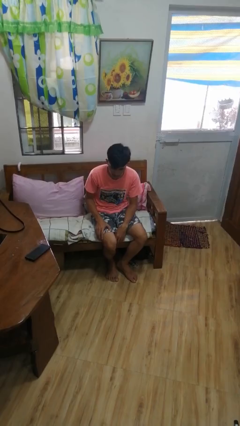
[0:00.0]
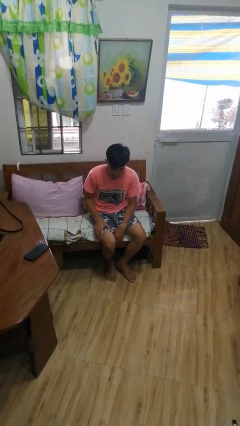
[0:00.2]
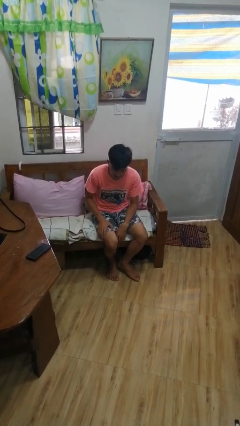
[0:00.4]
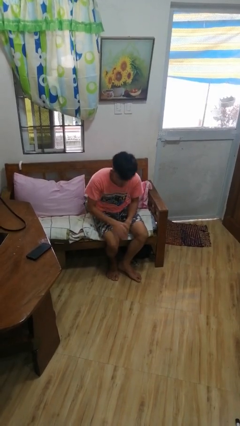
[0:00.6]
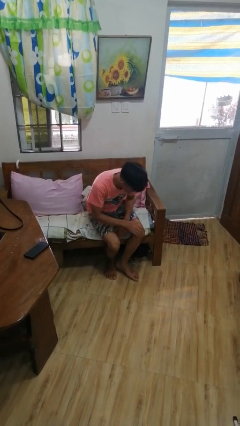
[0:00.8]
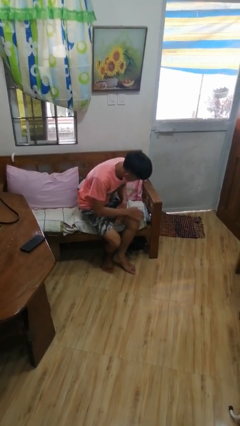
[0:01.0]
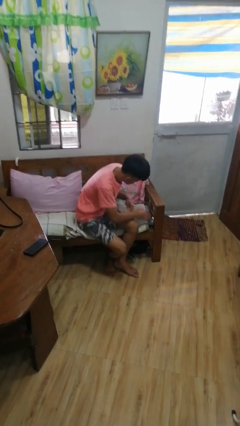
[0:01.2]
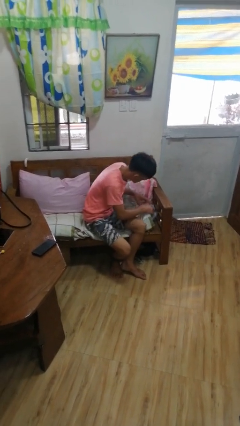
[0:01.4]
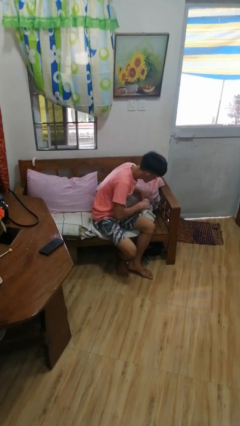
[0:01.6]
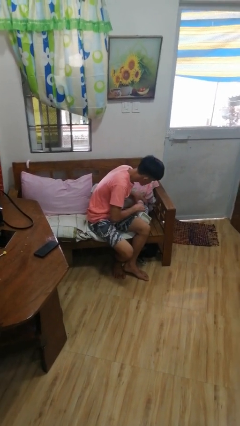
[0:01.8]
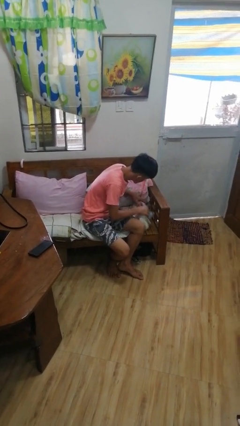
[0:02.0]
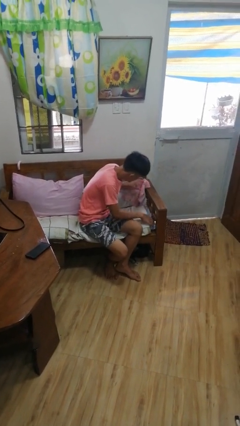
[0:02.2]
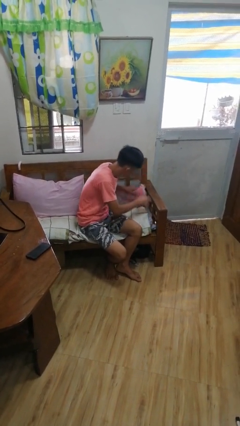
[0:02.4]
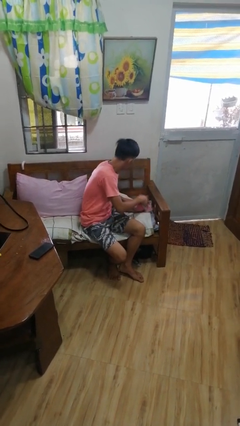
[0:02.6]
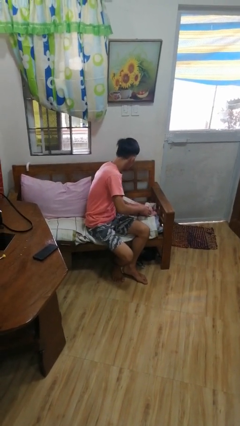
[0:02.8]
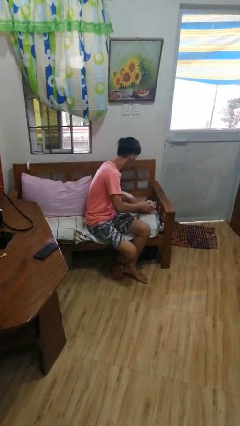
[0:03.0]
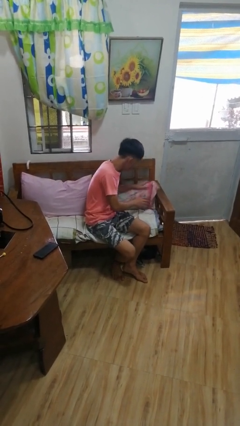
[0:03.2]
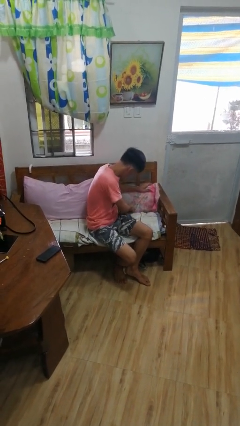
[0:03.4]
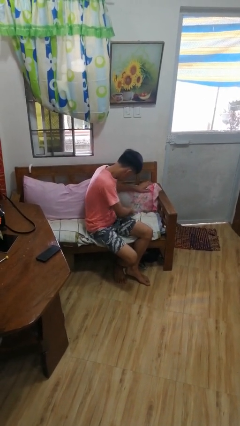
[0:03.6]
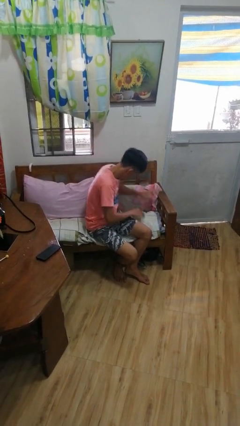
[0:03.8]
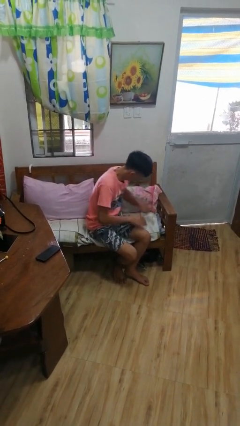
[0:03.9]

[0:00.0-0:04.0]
person searches in couch

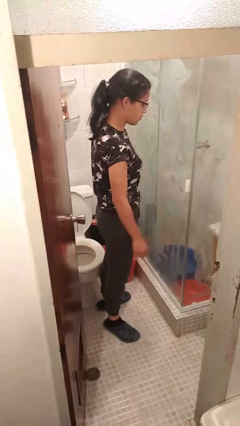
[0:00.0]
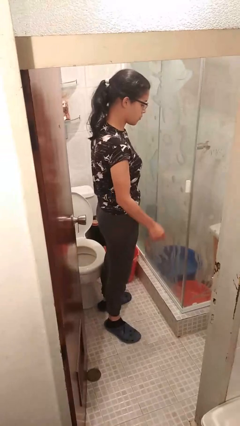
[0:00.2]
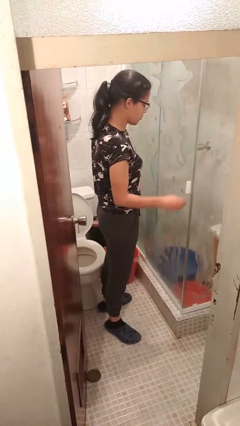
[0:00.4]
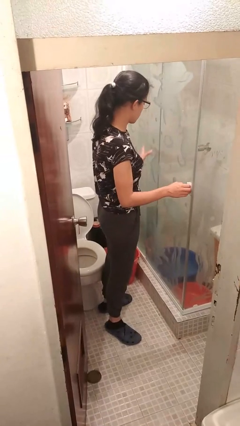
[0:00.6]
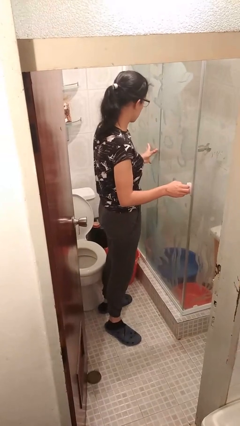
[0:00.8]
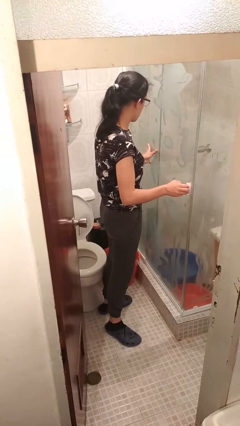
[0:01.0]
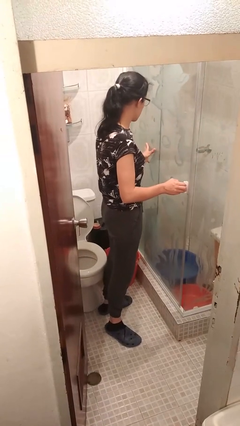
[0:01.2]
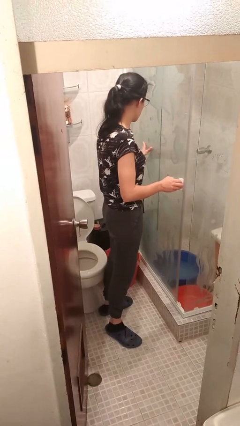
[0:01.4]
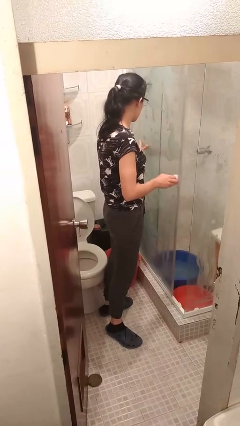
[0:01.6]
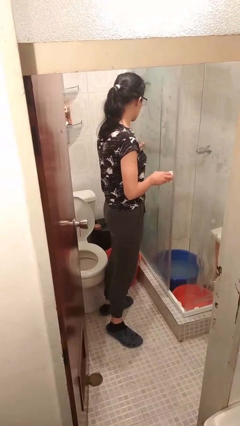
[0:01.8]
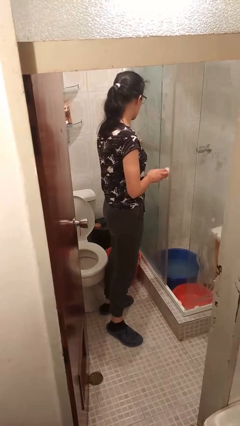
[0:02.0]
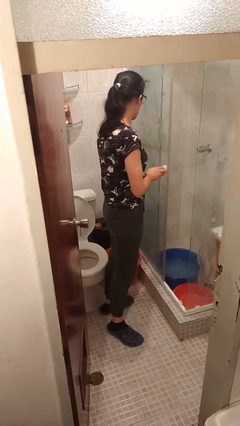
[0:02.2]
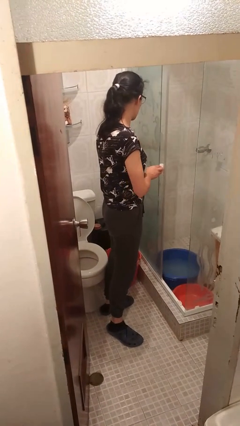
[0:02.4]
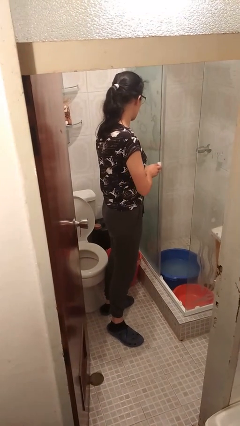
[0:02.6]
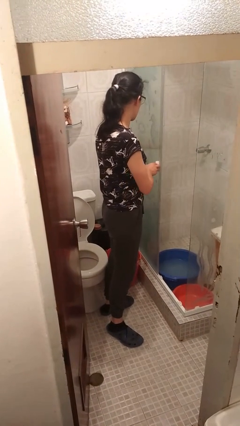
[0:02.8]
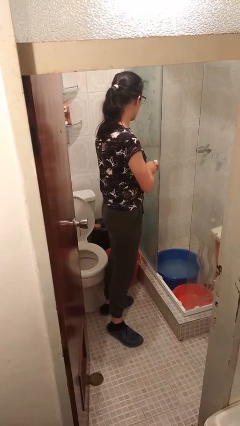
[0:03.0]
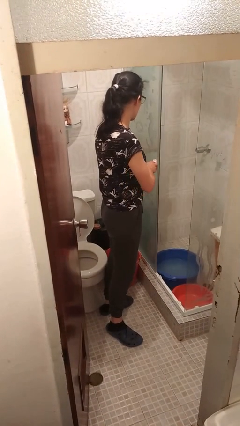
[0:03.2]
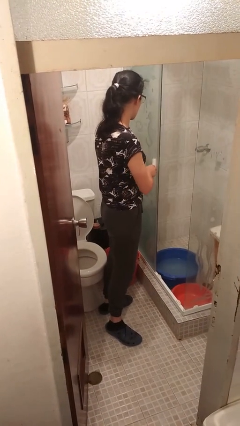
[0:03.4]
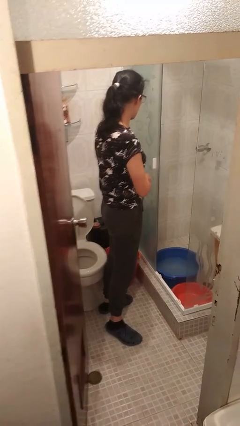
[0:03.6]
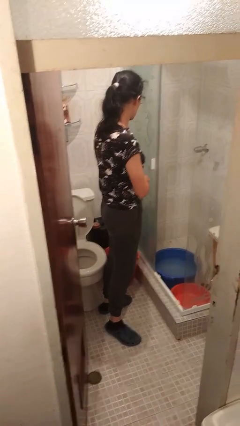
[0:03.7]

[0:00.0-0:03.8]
person opens sliding door

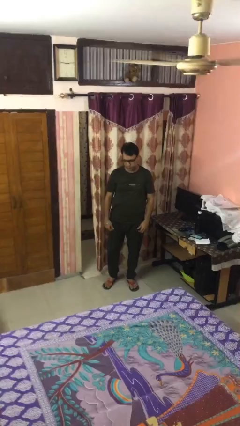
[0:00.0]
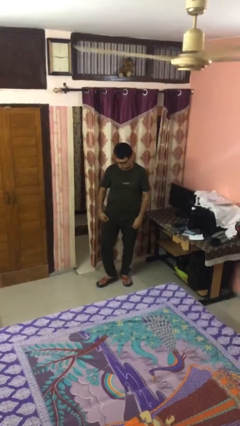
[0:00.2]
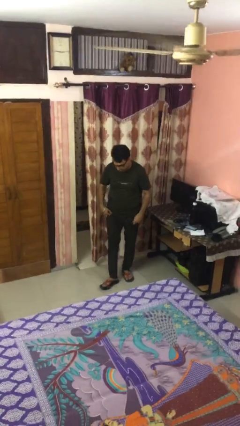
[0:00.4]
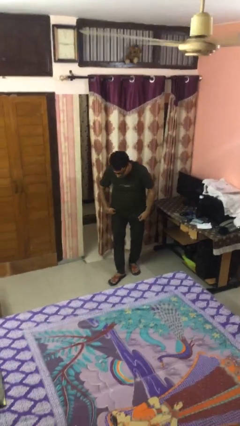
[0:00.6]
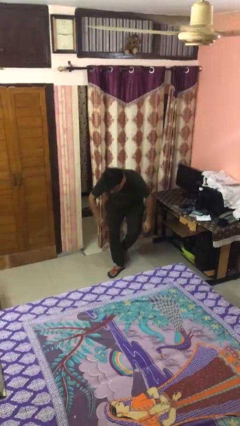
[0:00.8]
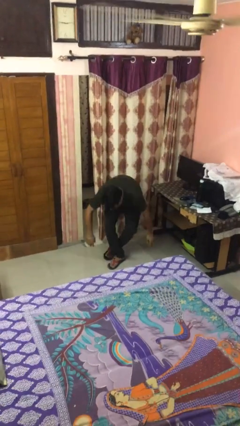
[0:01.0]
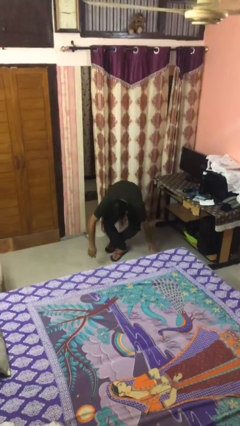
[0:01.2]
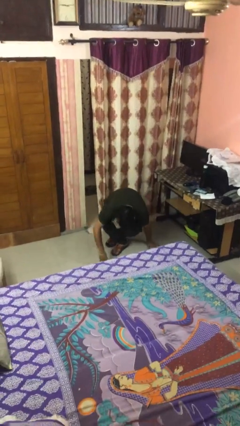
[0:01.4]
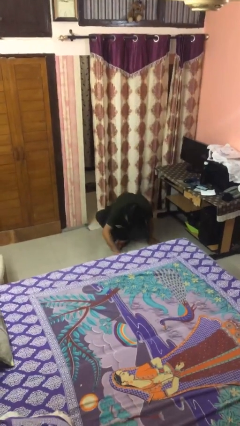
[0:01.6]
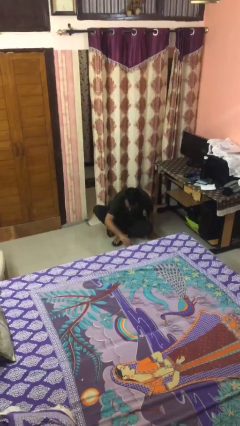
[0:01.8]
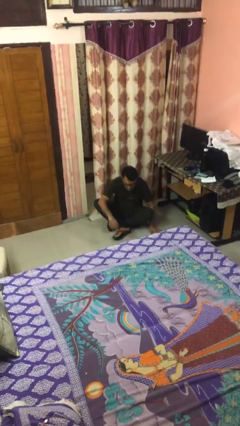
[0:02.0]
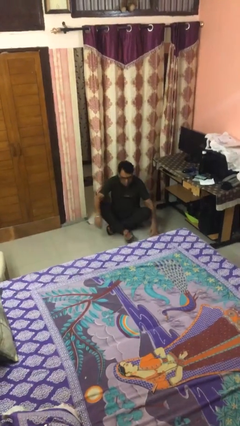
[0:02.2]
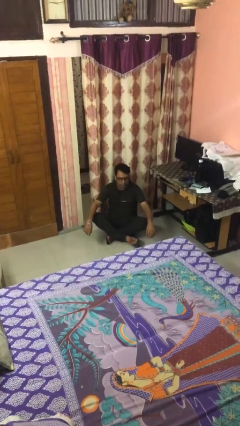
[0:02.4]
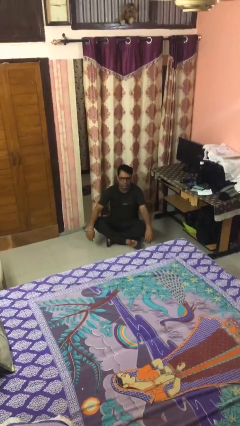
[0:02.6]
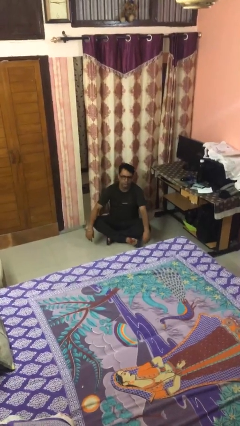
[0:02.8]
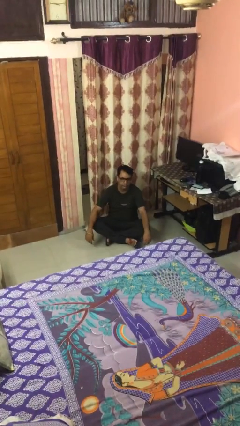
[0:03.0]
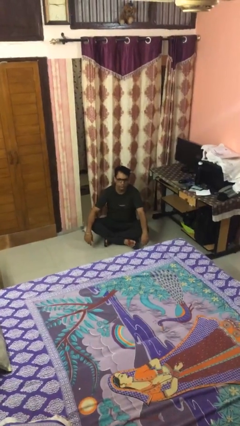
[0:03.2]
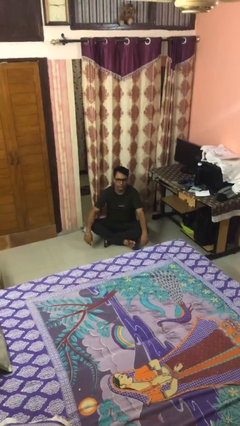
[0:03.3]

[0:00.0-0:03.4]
person sits crisscross

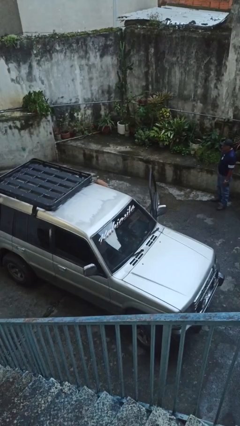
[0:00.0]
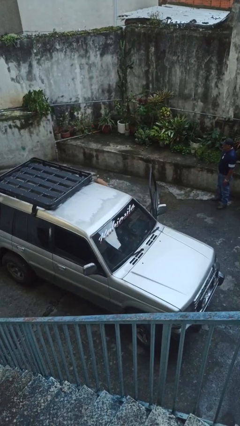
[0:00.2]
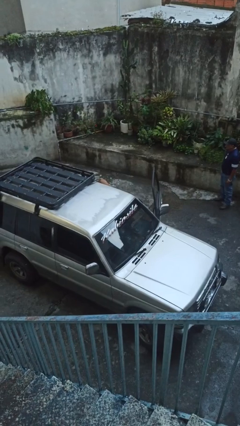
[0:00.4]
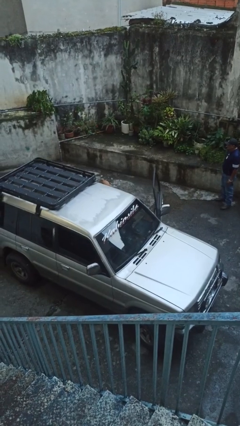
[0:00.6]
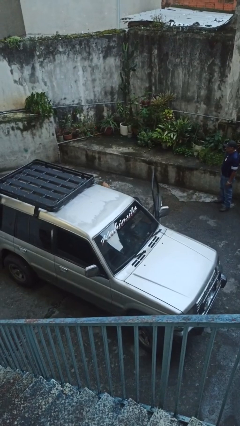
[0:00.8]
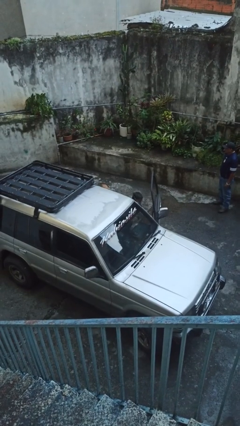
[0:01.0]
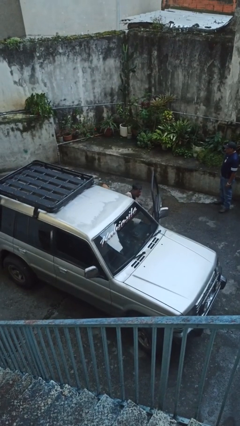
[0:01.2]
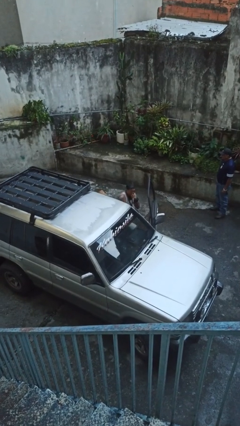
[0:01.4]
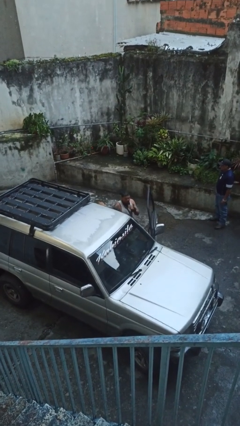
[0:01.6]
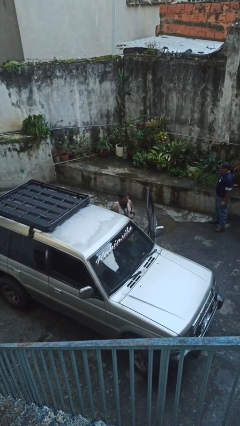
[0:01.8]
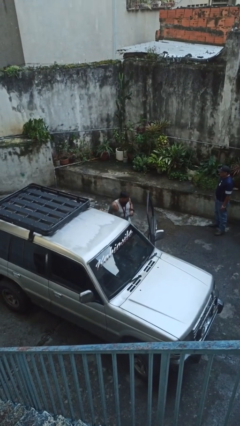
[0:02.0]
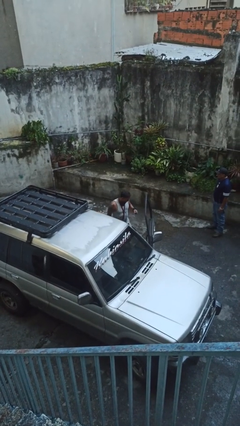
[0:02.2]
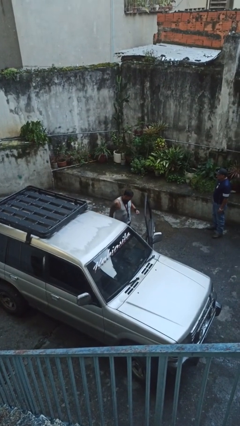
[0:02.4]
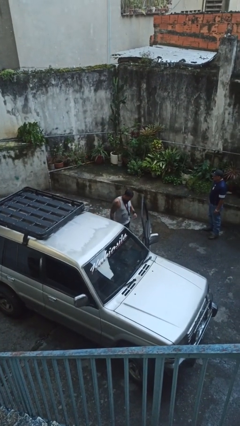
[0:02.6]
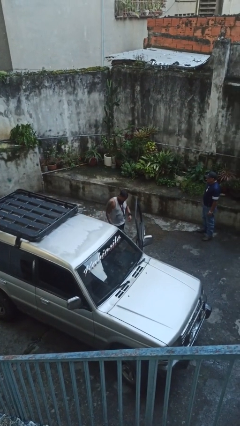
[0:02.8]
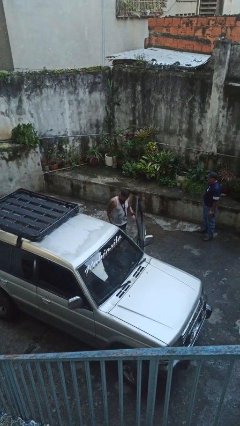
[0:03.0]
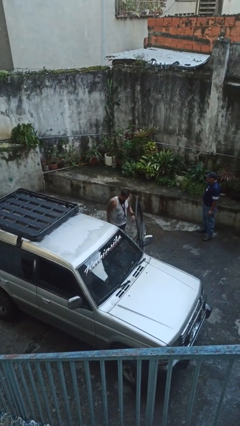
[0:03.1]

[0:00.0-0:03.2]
person exits car

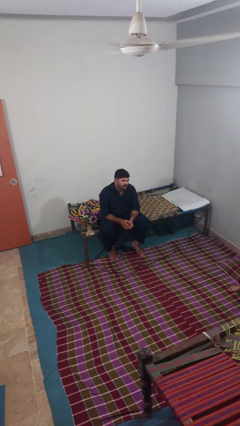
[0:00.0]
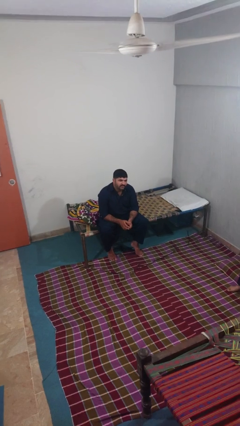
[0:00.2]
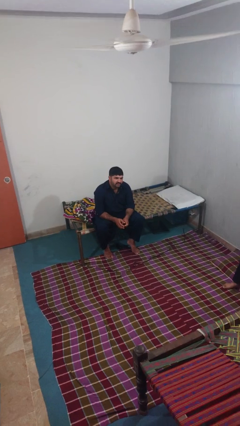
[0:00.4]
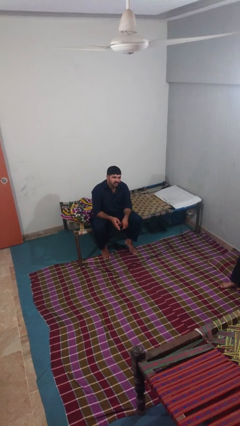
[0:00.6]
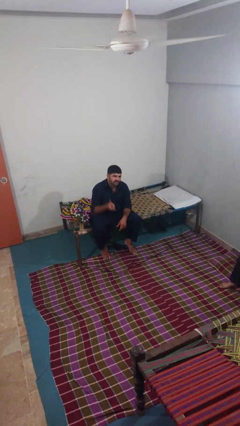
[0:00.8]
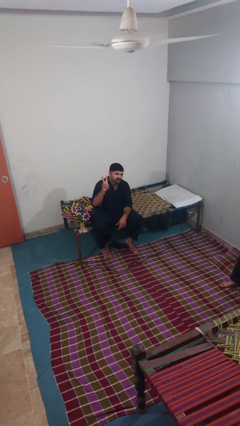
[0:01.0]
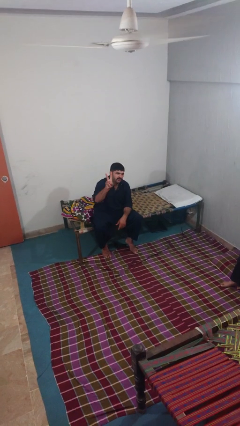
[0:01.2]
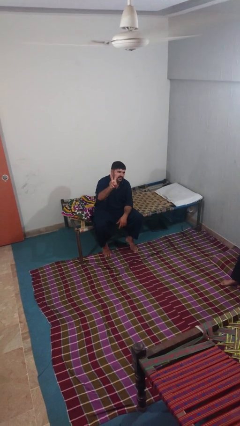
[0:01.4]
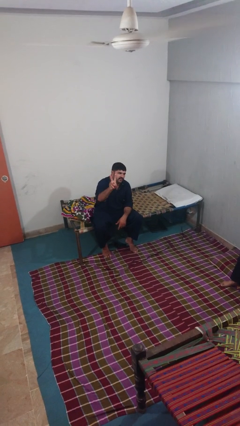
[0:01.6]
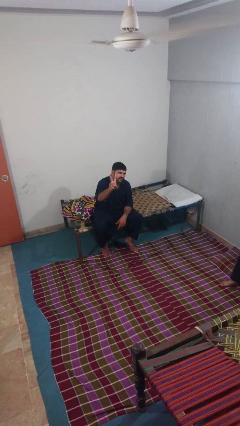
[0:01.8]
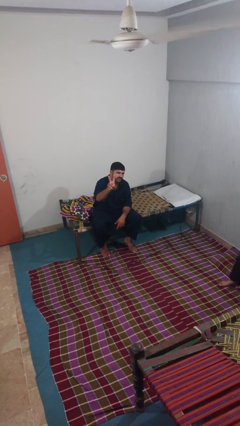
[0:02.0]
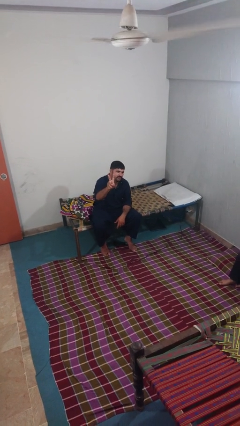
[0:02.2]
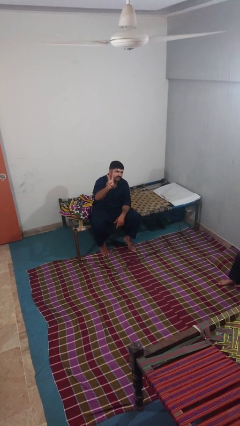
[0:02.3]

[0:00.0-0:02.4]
person gestures peace

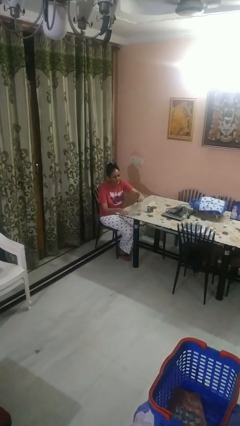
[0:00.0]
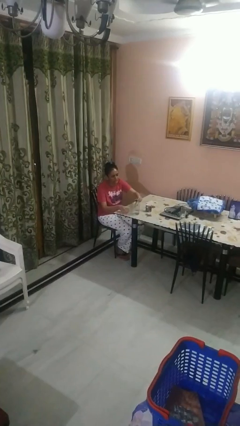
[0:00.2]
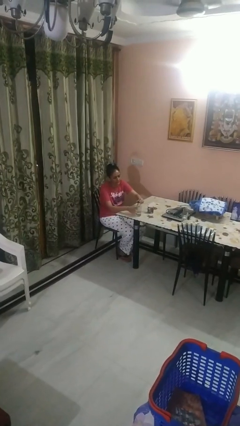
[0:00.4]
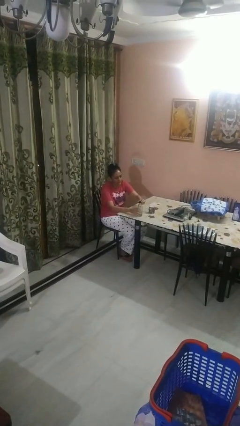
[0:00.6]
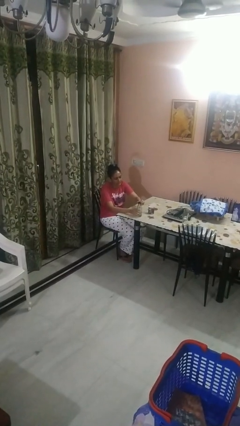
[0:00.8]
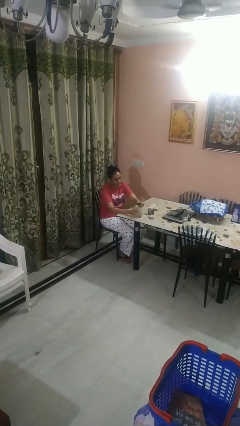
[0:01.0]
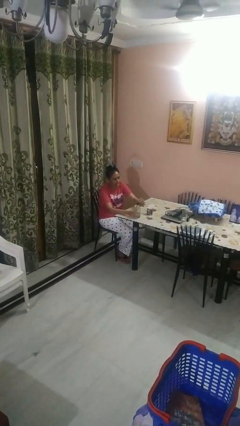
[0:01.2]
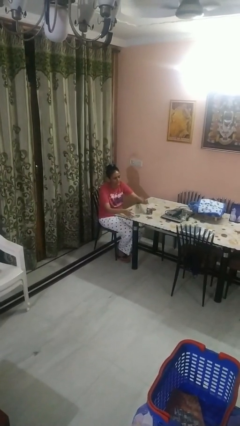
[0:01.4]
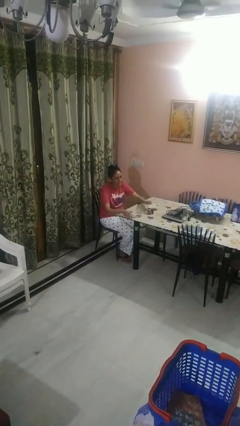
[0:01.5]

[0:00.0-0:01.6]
person screws lid to bottle
